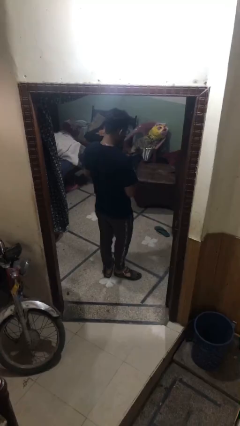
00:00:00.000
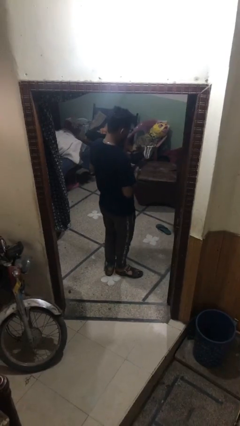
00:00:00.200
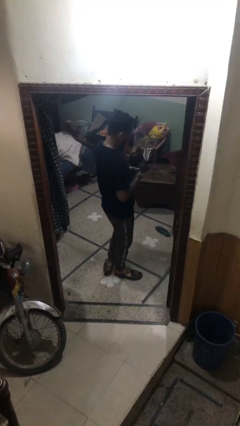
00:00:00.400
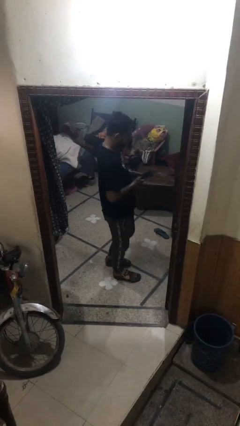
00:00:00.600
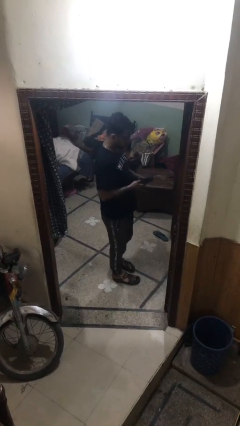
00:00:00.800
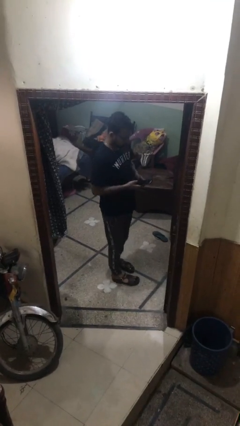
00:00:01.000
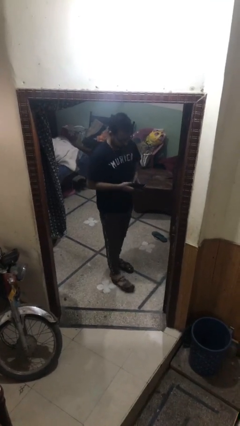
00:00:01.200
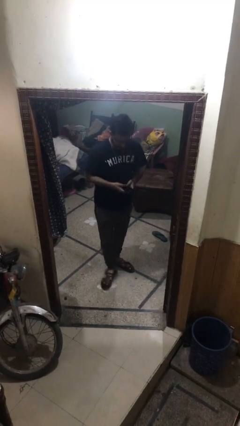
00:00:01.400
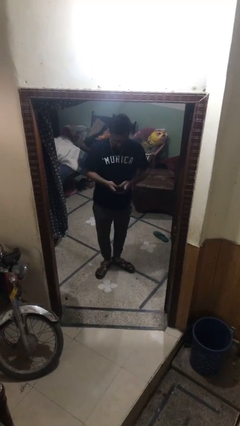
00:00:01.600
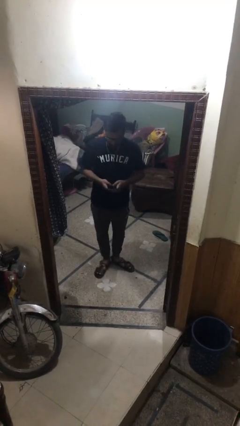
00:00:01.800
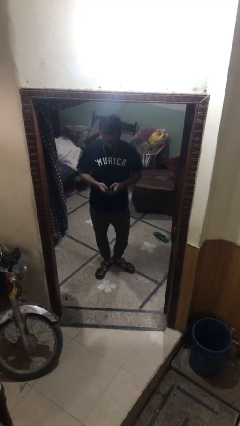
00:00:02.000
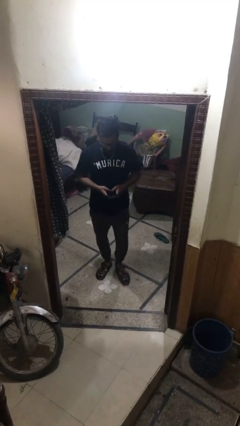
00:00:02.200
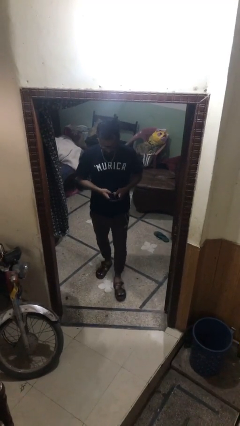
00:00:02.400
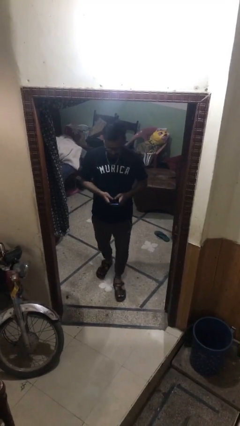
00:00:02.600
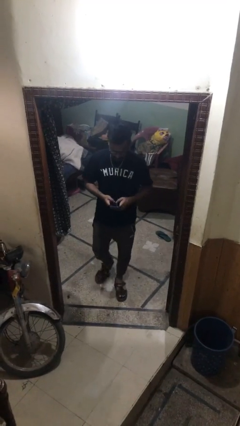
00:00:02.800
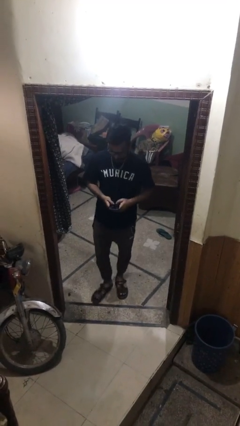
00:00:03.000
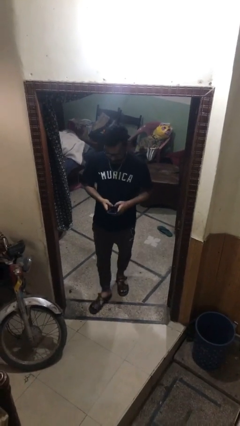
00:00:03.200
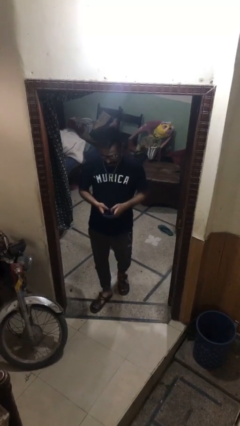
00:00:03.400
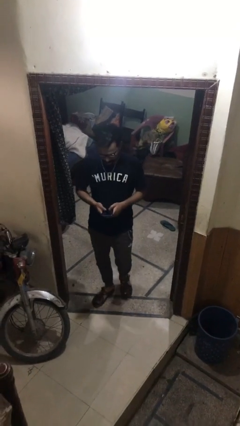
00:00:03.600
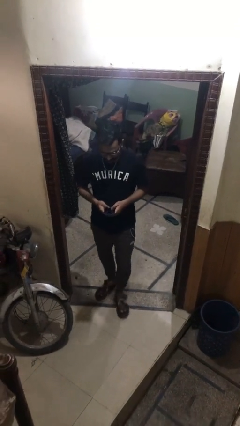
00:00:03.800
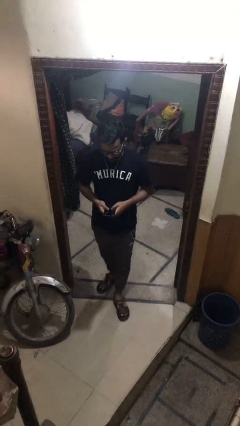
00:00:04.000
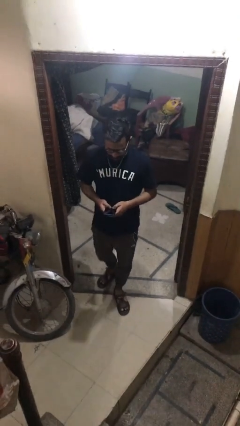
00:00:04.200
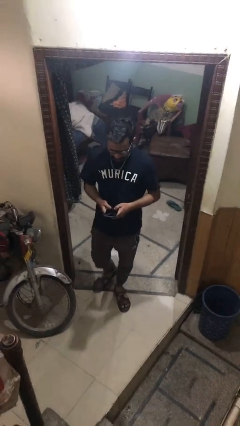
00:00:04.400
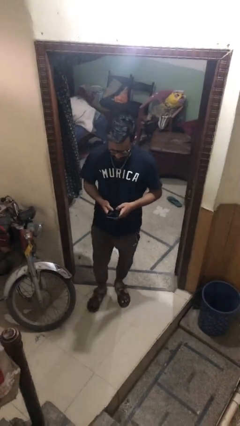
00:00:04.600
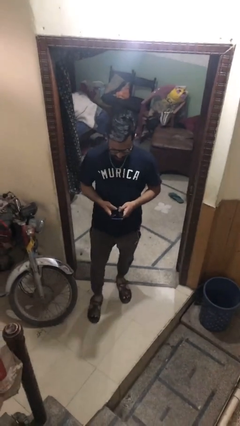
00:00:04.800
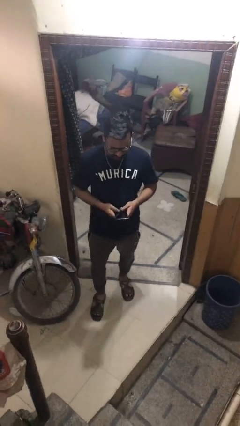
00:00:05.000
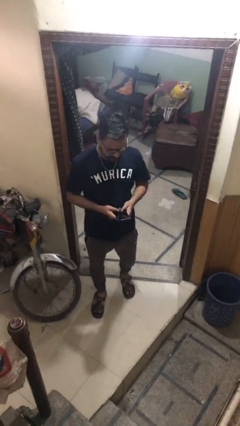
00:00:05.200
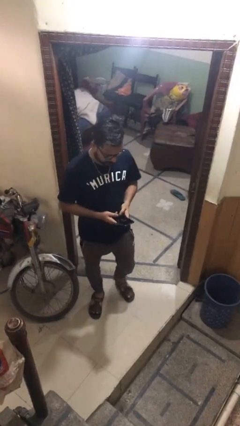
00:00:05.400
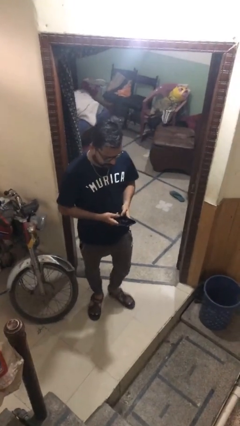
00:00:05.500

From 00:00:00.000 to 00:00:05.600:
person enters scene through structure

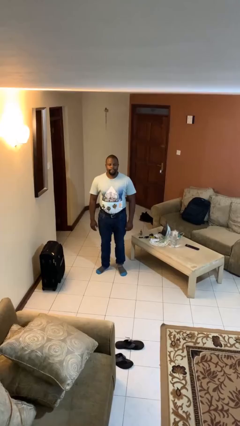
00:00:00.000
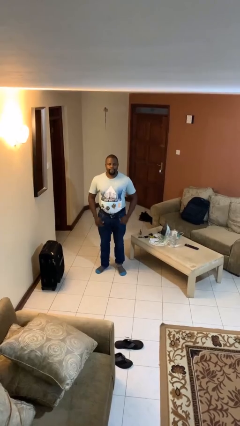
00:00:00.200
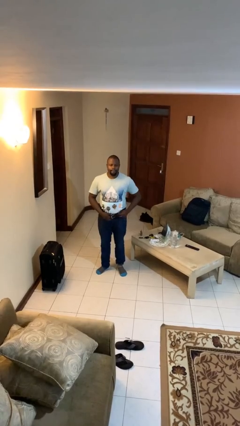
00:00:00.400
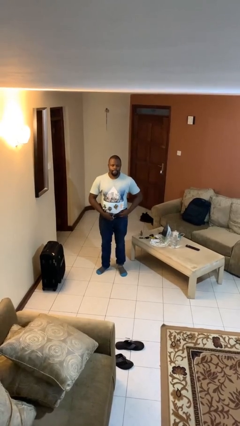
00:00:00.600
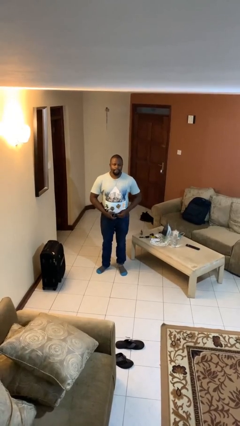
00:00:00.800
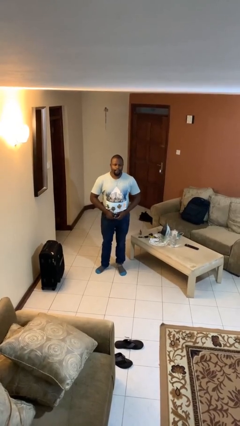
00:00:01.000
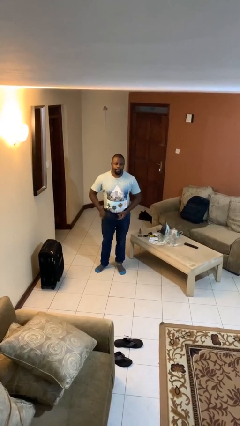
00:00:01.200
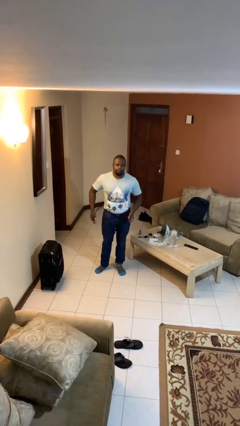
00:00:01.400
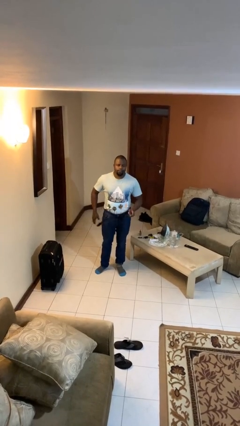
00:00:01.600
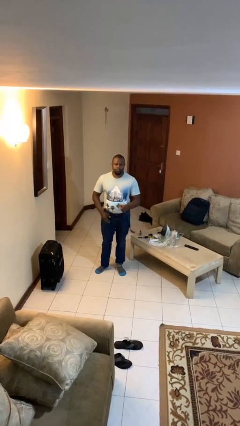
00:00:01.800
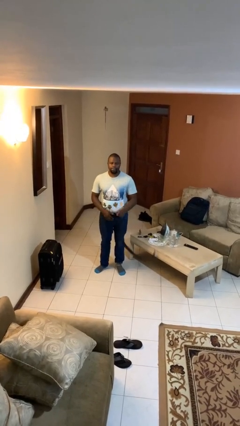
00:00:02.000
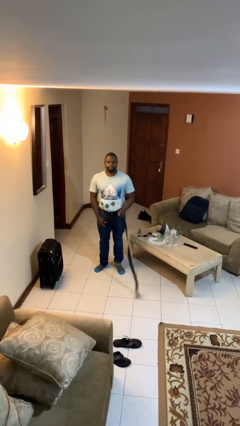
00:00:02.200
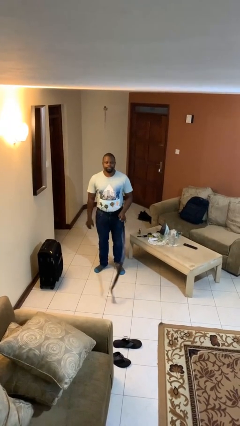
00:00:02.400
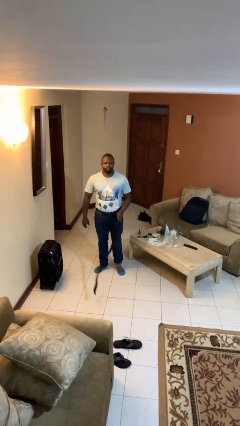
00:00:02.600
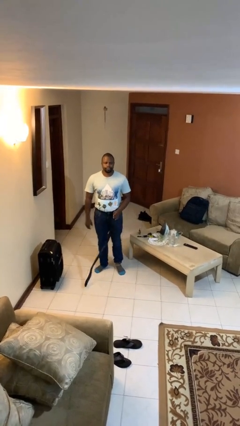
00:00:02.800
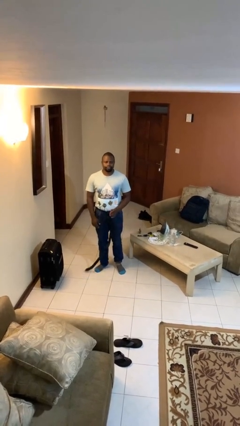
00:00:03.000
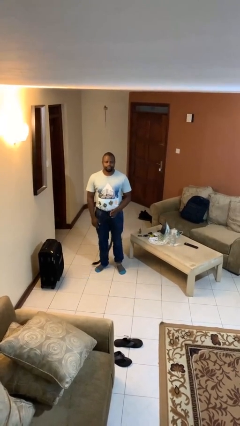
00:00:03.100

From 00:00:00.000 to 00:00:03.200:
person takes off belt

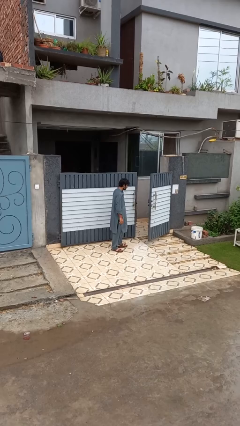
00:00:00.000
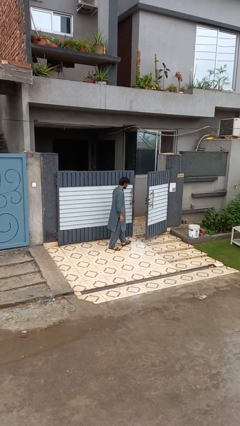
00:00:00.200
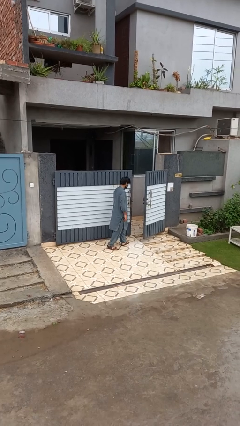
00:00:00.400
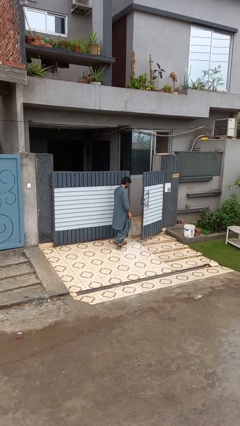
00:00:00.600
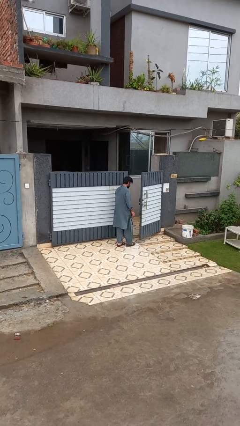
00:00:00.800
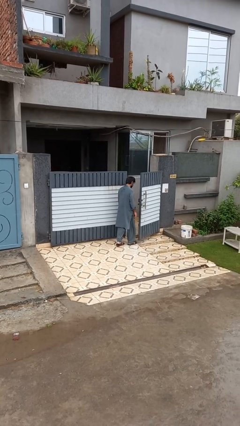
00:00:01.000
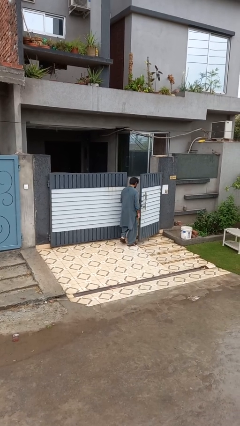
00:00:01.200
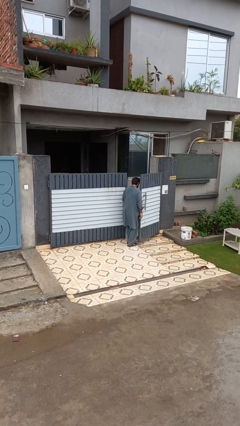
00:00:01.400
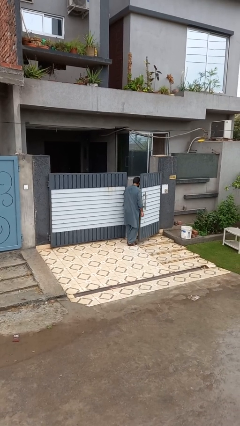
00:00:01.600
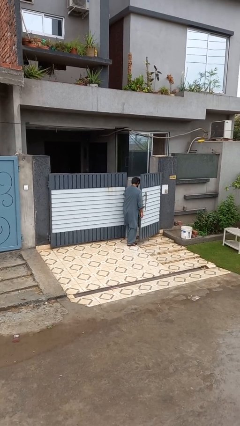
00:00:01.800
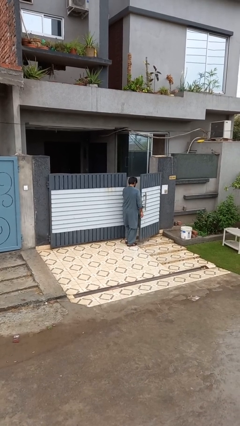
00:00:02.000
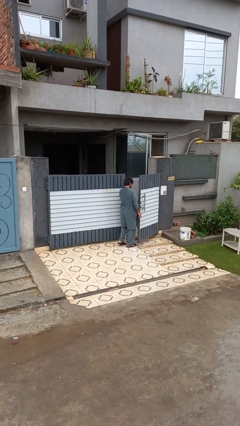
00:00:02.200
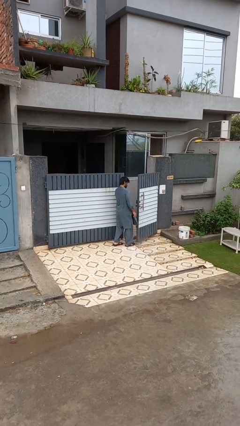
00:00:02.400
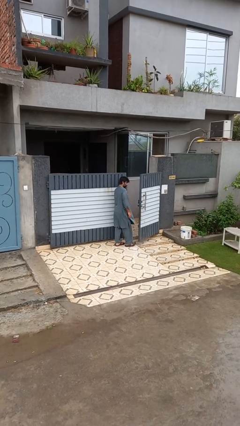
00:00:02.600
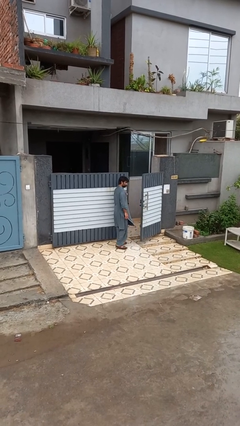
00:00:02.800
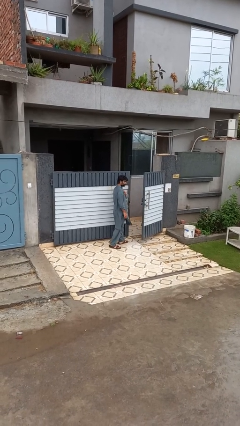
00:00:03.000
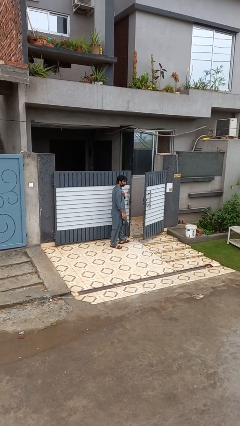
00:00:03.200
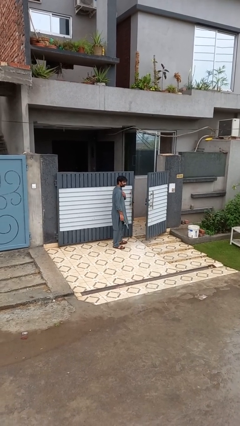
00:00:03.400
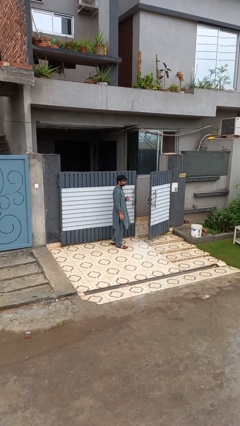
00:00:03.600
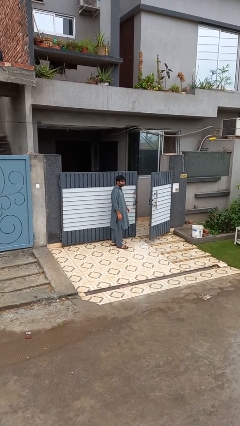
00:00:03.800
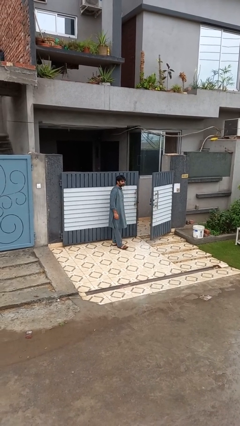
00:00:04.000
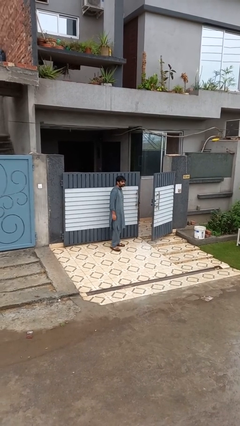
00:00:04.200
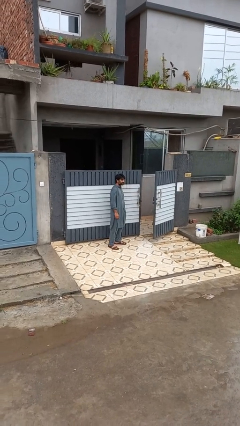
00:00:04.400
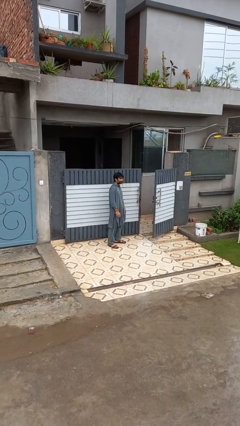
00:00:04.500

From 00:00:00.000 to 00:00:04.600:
person bumps into wall

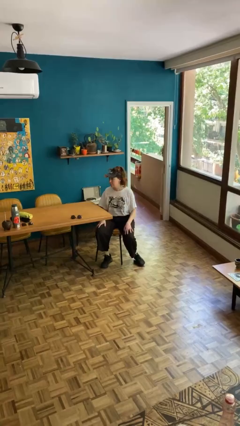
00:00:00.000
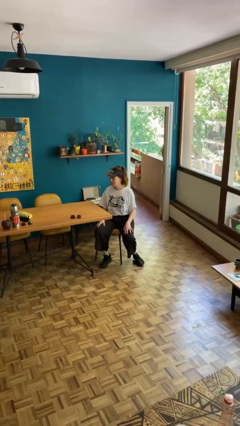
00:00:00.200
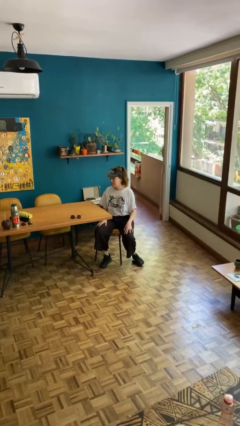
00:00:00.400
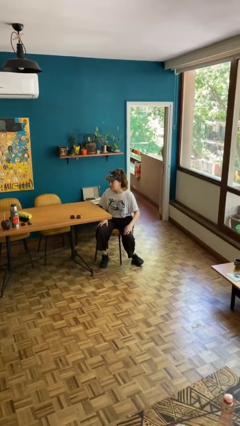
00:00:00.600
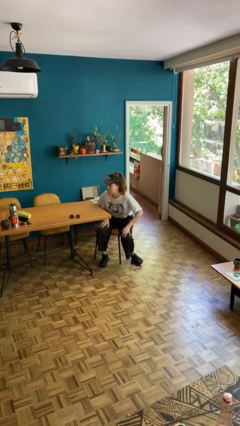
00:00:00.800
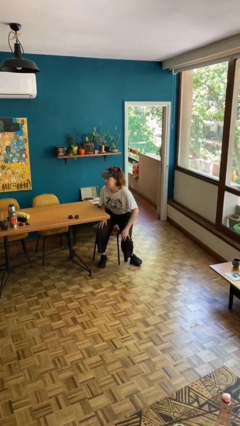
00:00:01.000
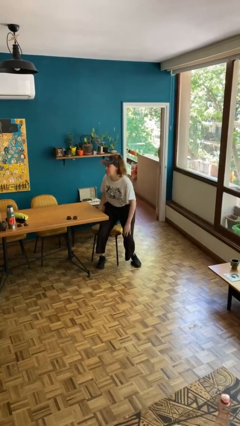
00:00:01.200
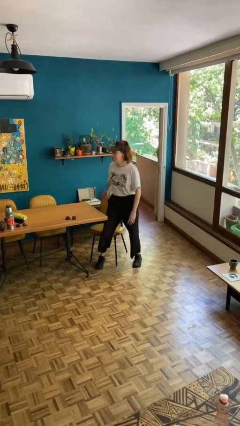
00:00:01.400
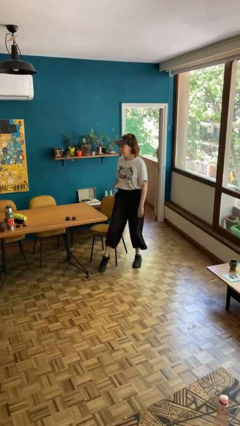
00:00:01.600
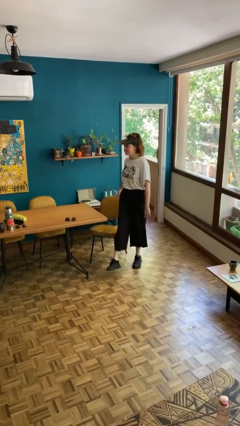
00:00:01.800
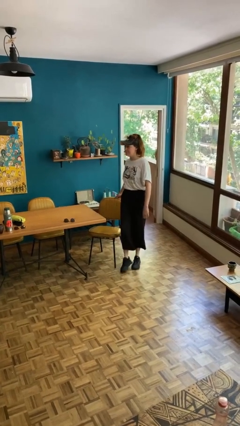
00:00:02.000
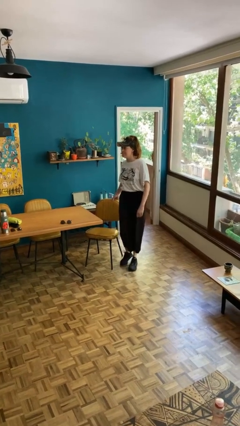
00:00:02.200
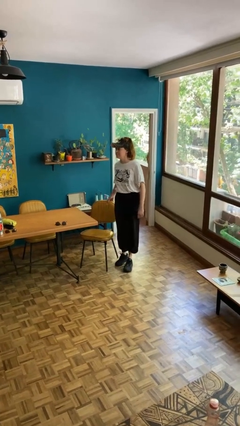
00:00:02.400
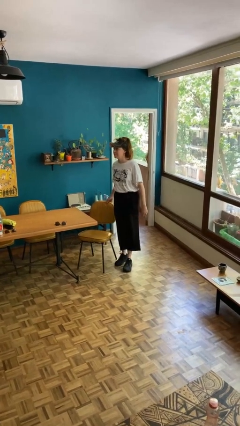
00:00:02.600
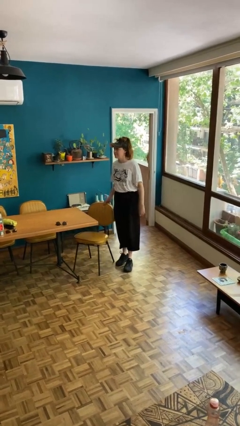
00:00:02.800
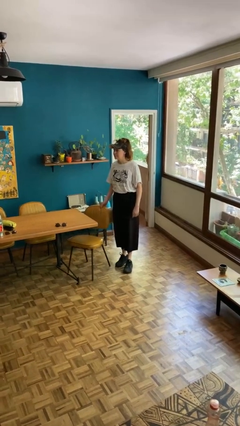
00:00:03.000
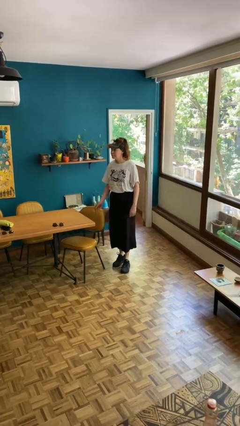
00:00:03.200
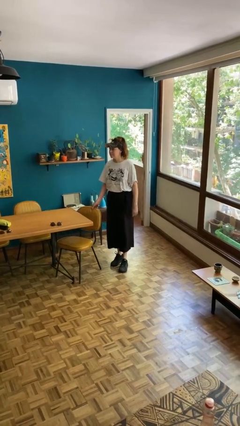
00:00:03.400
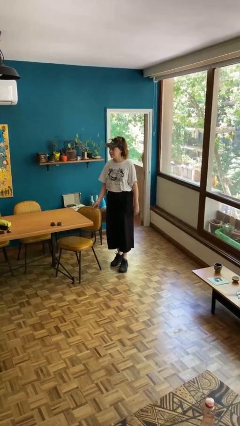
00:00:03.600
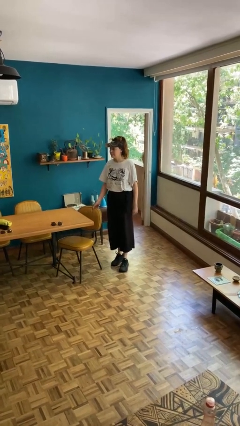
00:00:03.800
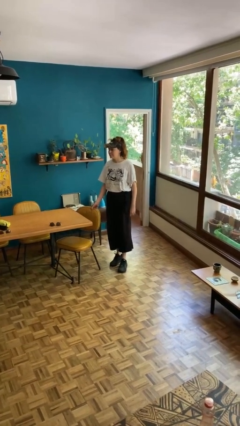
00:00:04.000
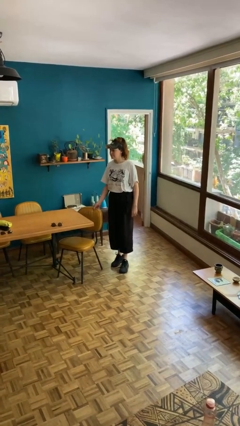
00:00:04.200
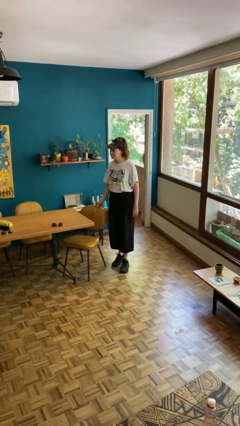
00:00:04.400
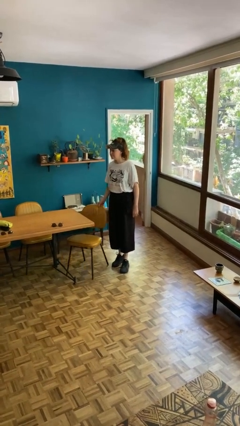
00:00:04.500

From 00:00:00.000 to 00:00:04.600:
person stands up
